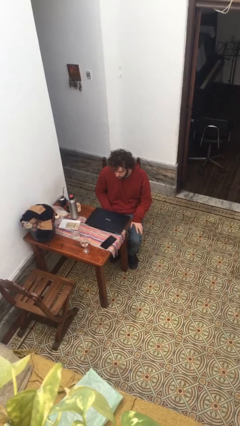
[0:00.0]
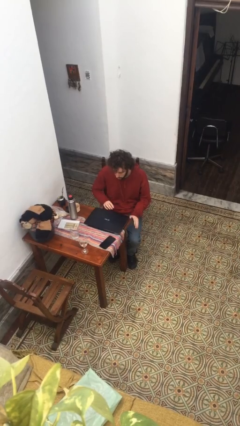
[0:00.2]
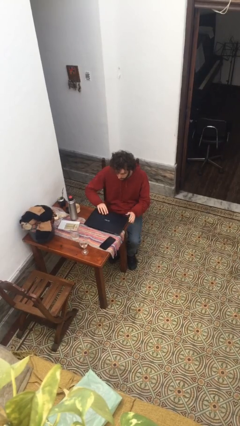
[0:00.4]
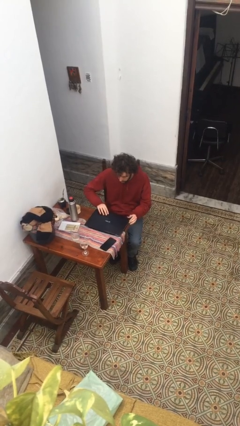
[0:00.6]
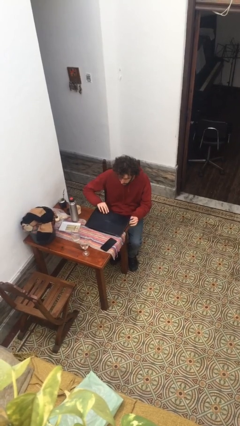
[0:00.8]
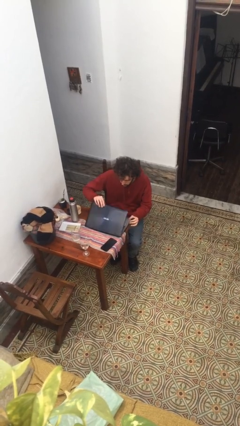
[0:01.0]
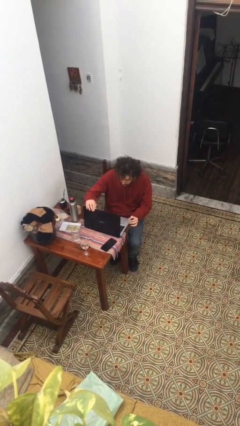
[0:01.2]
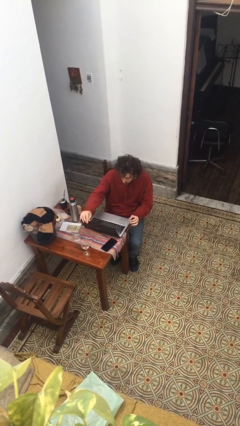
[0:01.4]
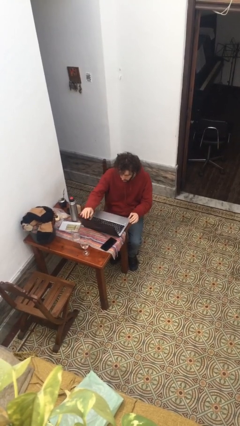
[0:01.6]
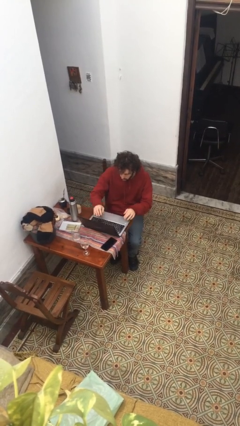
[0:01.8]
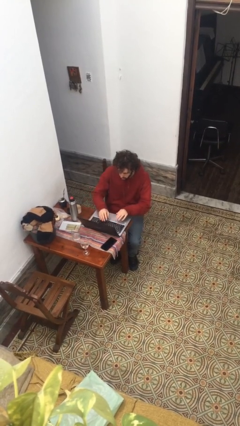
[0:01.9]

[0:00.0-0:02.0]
person opens laptop

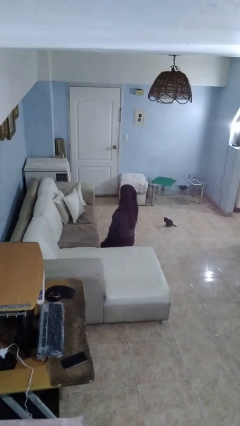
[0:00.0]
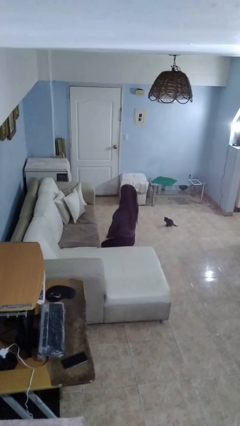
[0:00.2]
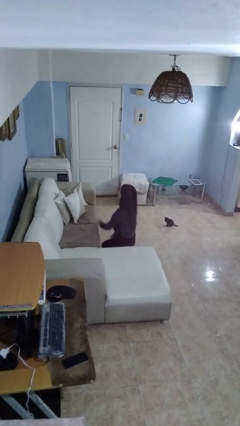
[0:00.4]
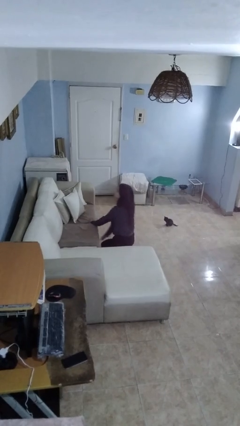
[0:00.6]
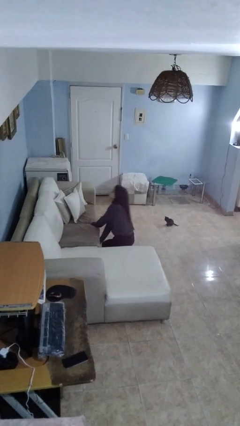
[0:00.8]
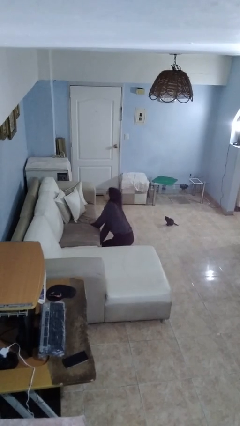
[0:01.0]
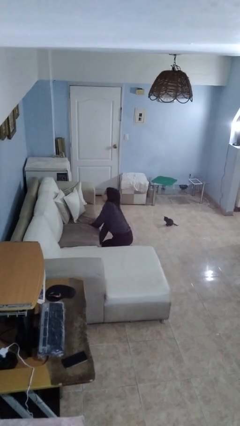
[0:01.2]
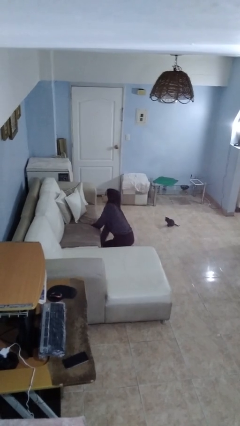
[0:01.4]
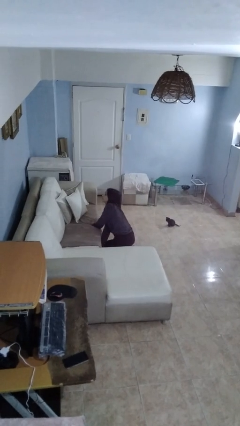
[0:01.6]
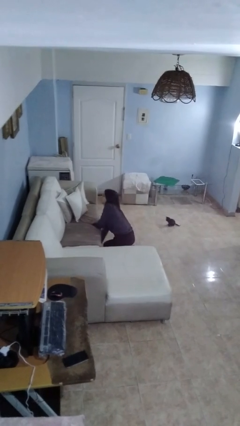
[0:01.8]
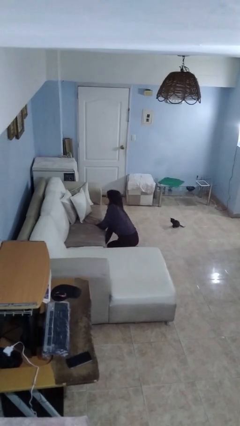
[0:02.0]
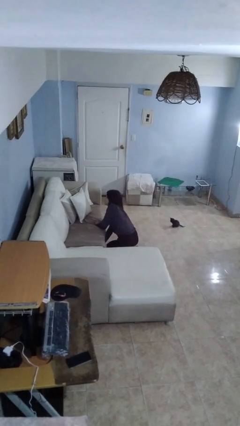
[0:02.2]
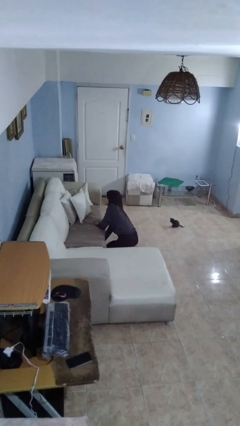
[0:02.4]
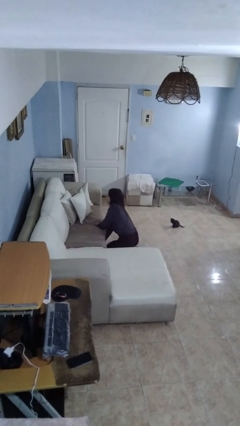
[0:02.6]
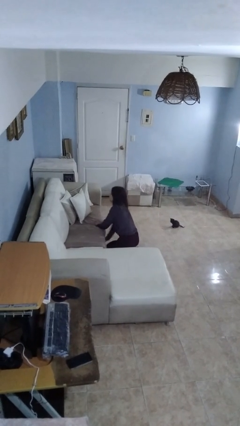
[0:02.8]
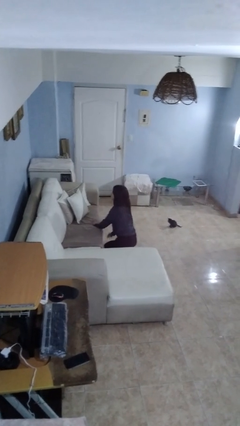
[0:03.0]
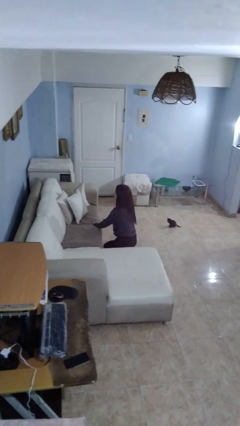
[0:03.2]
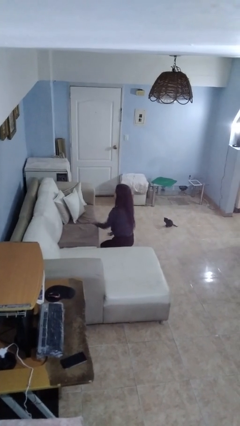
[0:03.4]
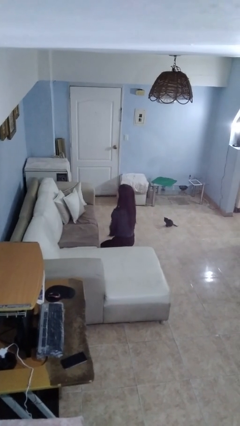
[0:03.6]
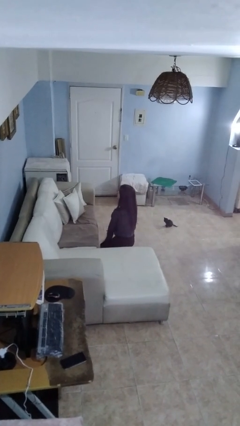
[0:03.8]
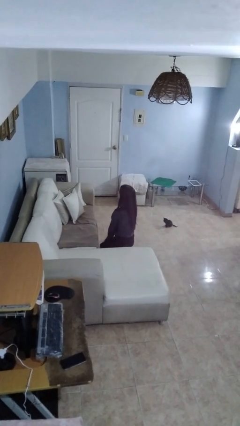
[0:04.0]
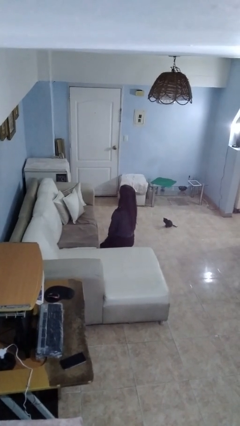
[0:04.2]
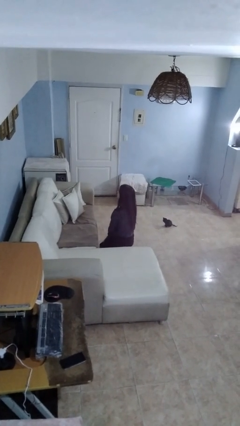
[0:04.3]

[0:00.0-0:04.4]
person searches under couch

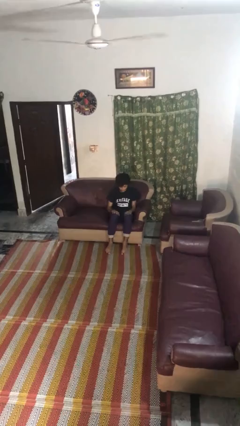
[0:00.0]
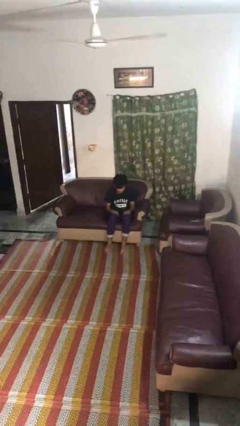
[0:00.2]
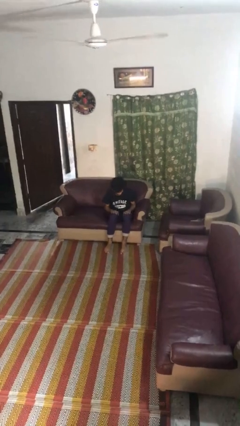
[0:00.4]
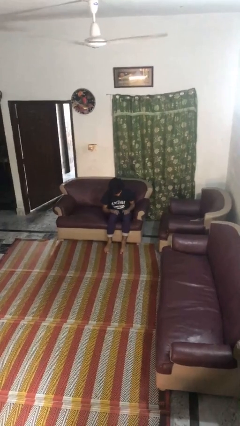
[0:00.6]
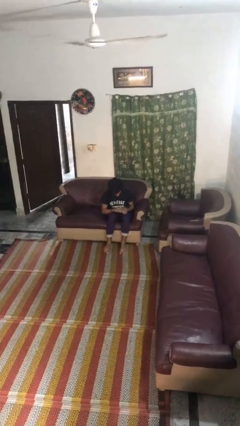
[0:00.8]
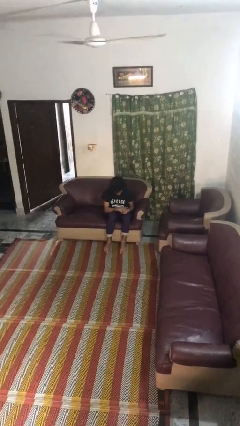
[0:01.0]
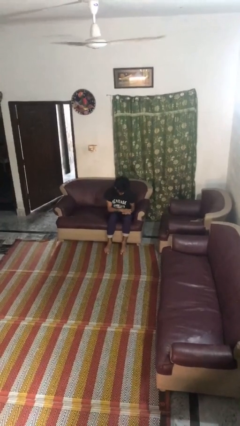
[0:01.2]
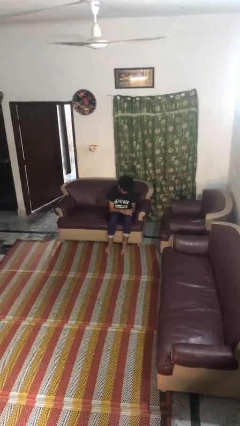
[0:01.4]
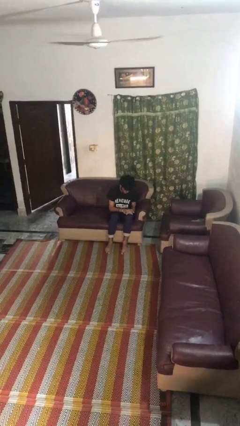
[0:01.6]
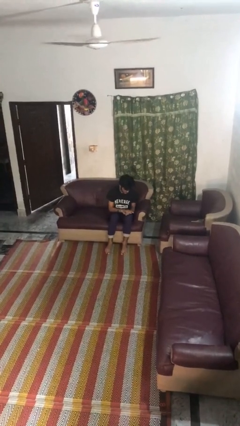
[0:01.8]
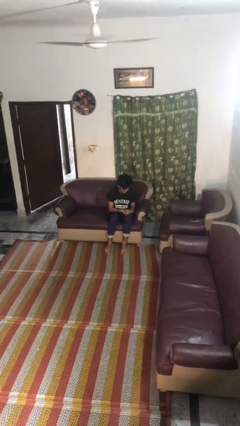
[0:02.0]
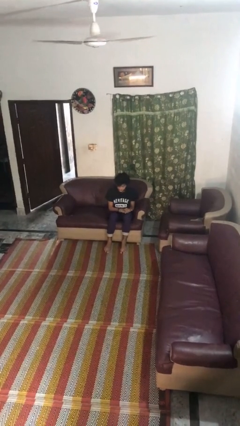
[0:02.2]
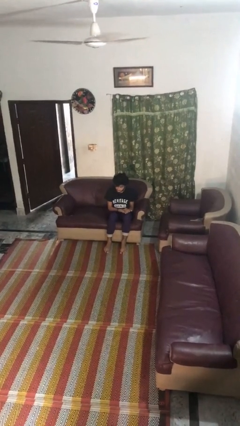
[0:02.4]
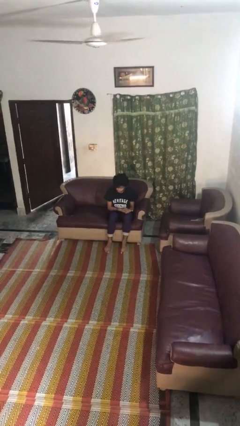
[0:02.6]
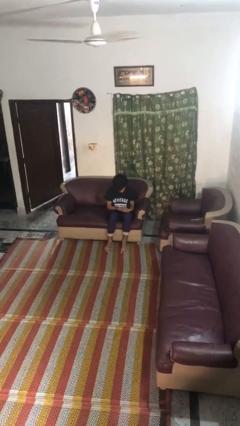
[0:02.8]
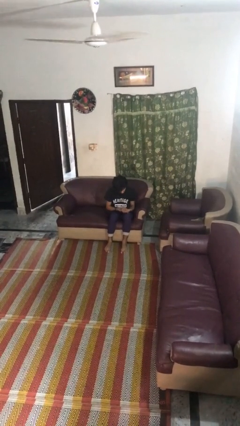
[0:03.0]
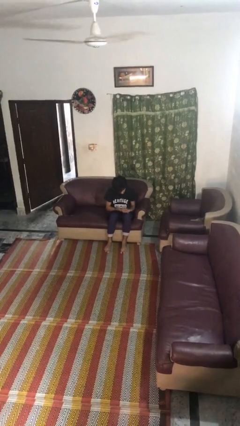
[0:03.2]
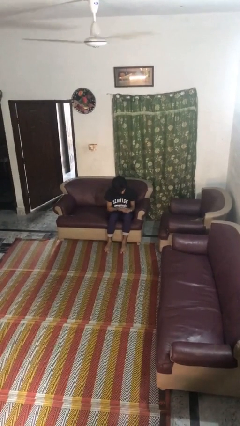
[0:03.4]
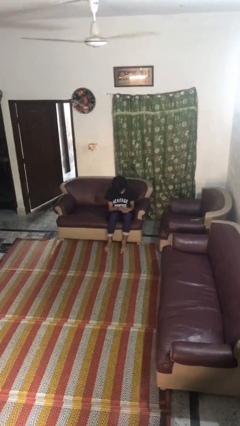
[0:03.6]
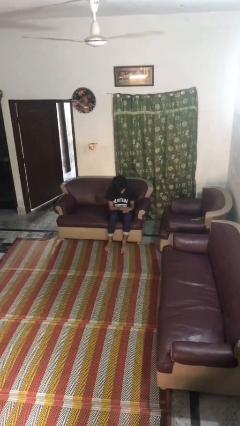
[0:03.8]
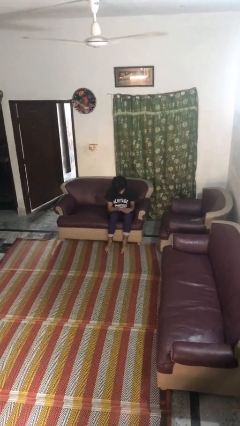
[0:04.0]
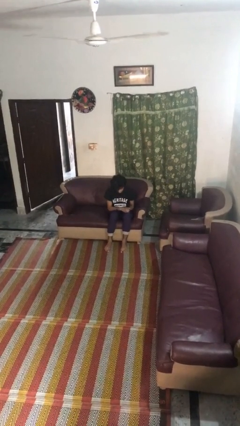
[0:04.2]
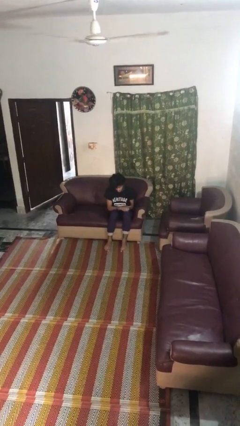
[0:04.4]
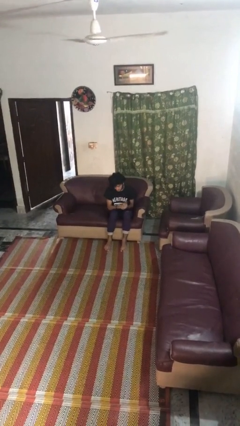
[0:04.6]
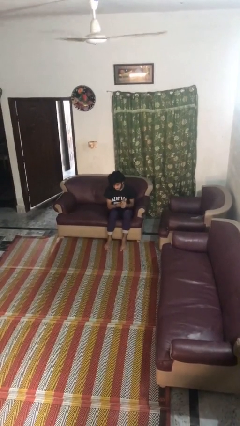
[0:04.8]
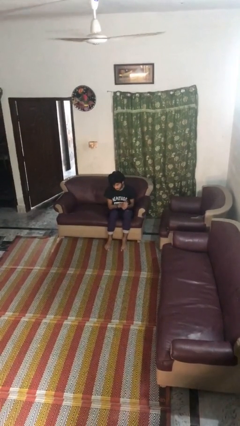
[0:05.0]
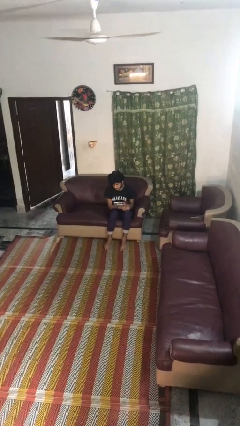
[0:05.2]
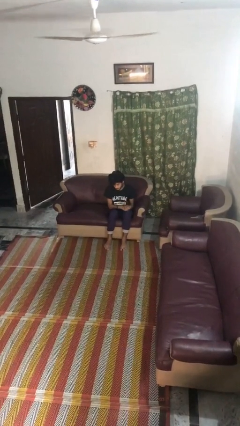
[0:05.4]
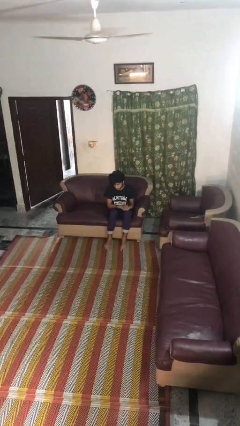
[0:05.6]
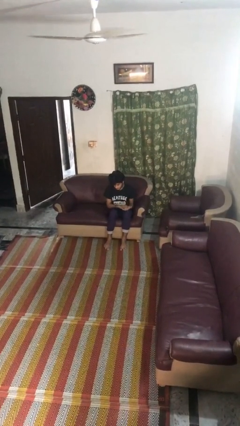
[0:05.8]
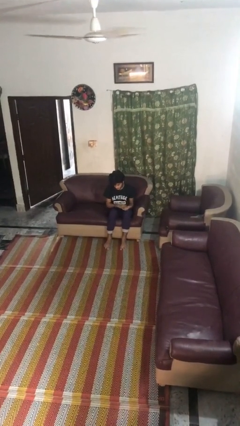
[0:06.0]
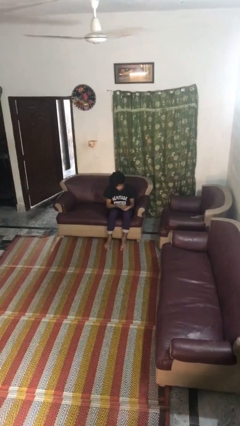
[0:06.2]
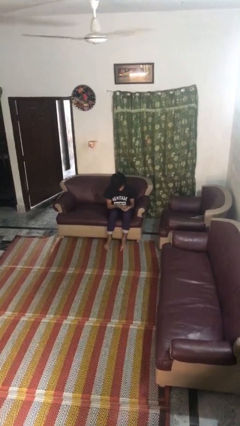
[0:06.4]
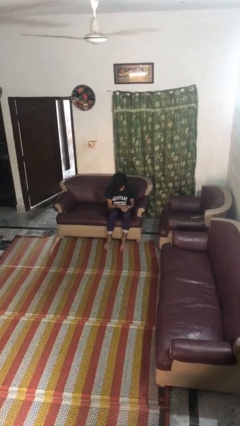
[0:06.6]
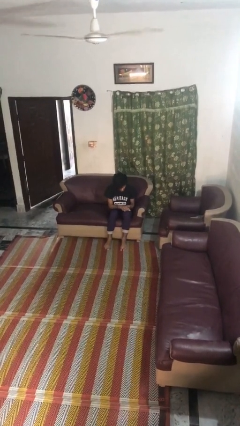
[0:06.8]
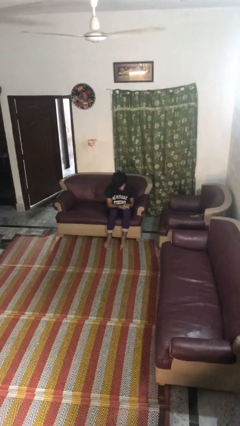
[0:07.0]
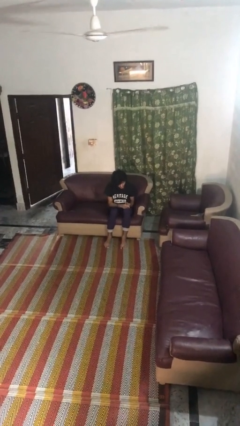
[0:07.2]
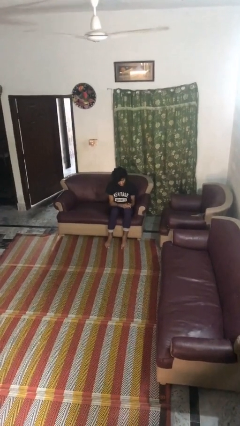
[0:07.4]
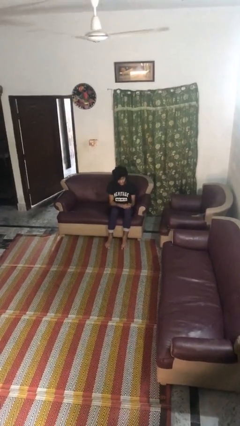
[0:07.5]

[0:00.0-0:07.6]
person looks at hands in lap

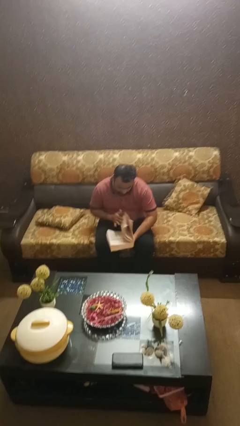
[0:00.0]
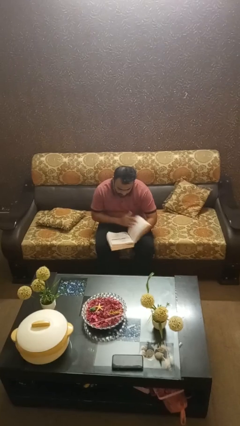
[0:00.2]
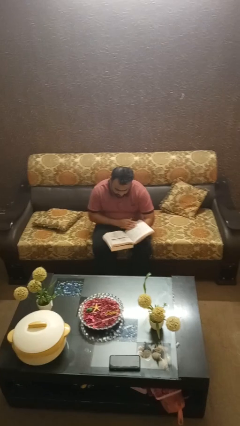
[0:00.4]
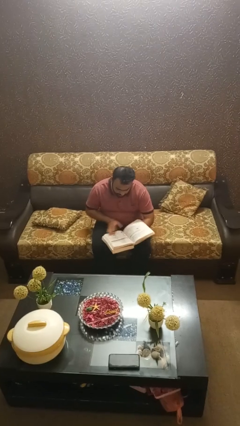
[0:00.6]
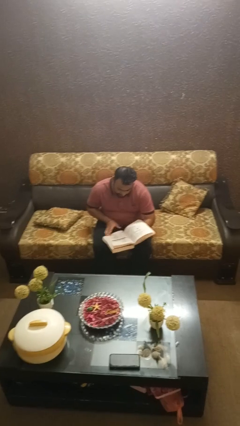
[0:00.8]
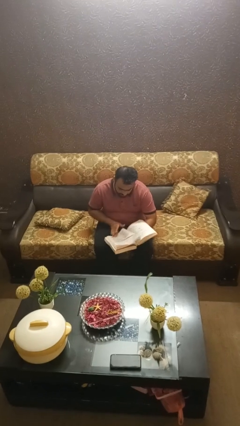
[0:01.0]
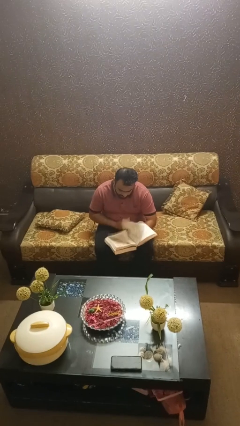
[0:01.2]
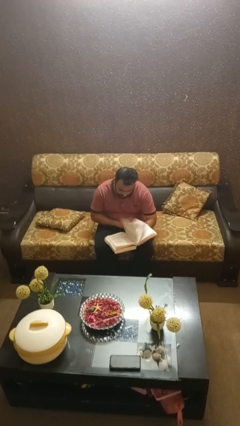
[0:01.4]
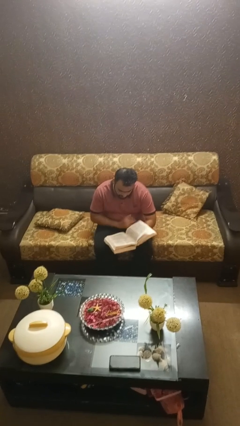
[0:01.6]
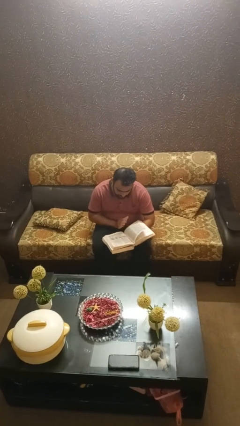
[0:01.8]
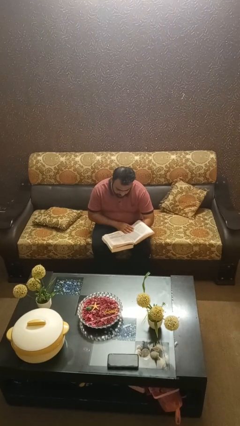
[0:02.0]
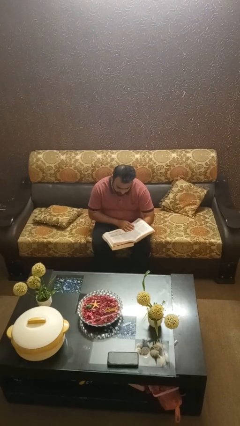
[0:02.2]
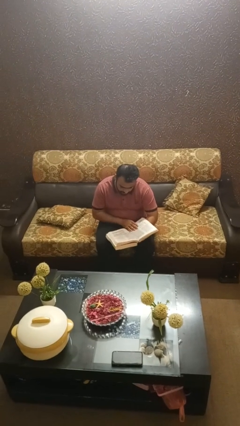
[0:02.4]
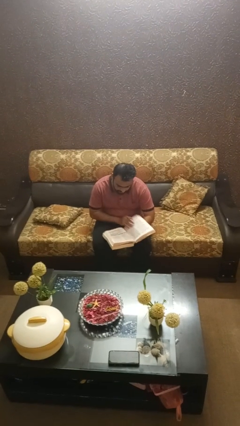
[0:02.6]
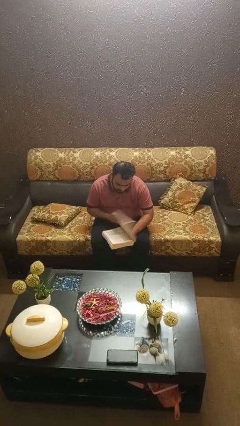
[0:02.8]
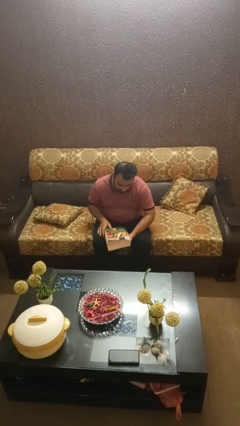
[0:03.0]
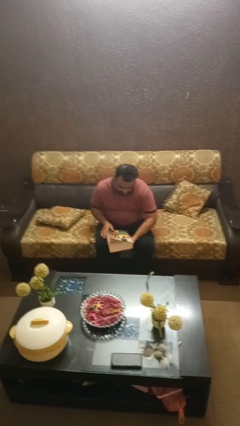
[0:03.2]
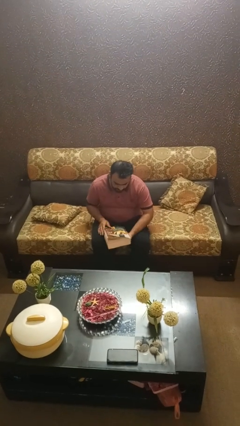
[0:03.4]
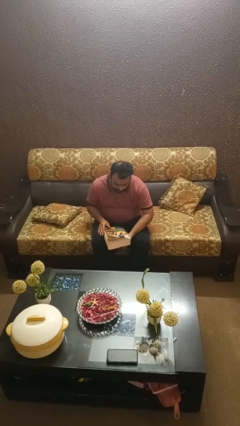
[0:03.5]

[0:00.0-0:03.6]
person reads book
